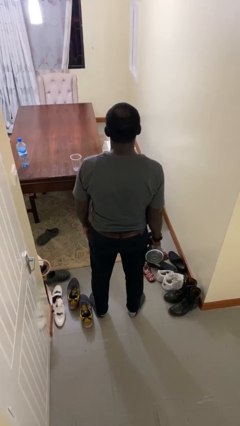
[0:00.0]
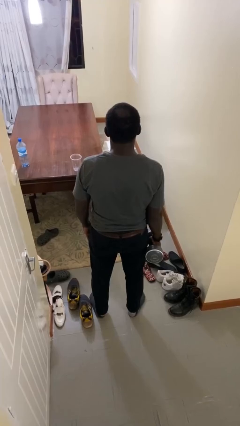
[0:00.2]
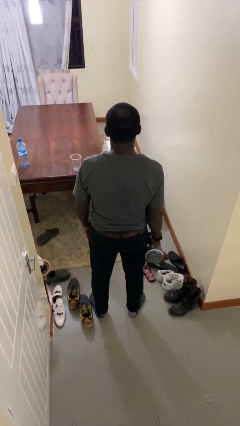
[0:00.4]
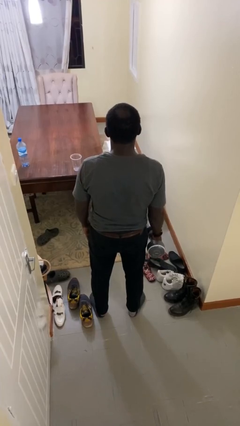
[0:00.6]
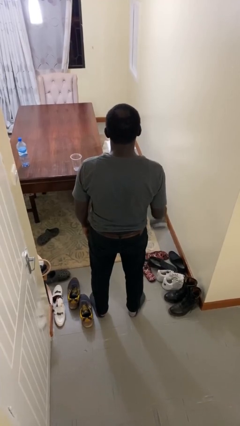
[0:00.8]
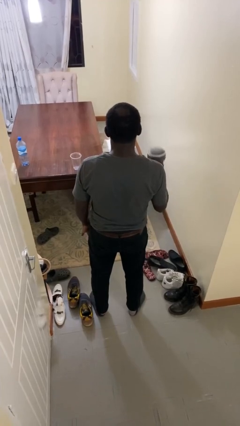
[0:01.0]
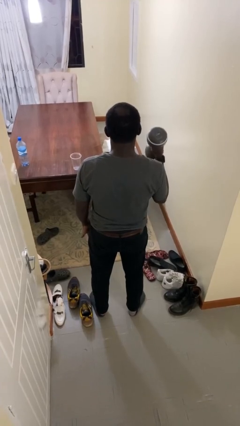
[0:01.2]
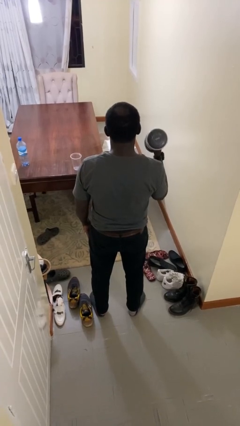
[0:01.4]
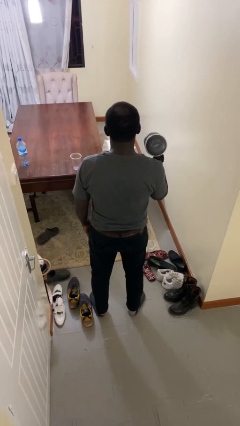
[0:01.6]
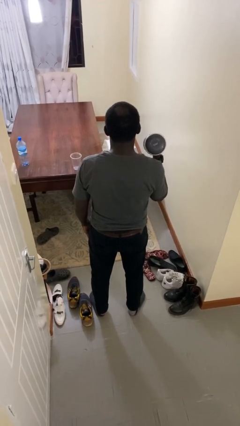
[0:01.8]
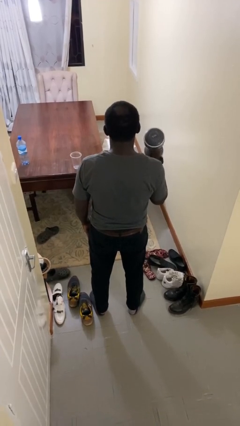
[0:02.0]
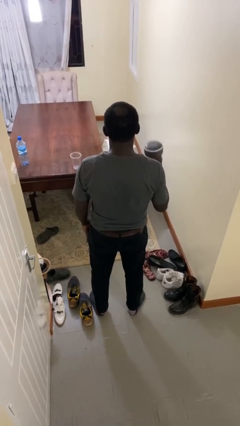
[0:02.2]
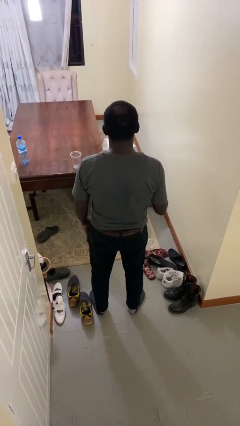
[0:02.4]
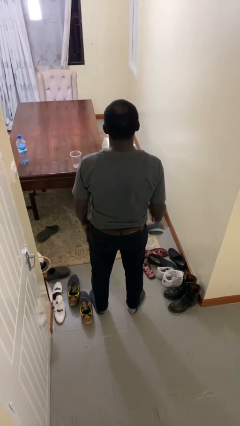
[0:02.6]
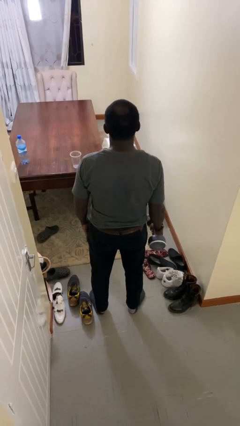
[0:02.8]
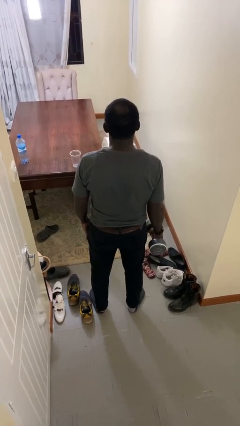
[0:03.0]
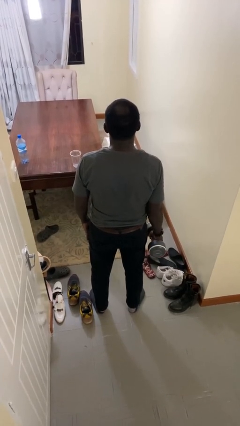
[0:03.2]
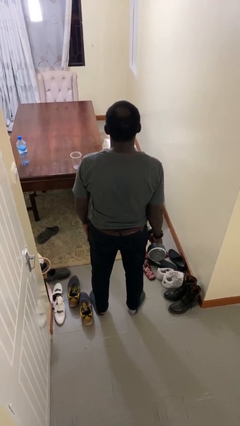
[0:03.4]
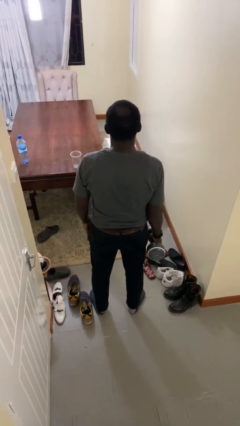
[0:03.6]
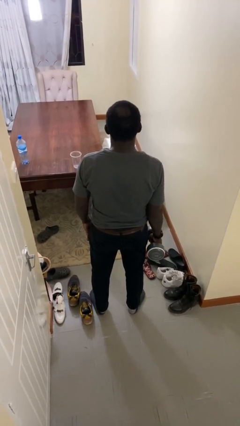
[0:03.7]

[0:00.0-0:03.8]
person lifts dumbbells

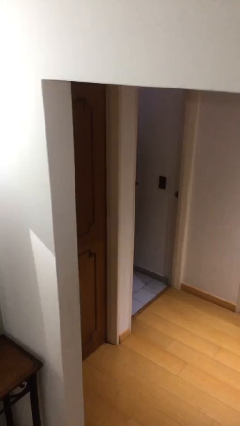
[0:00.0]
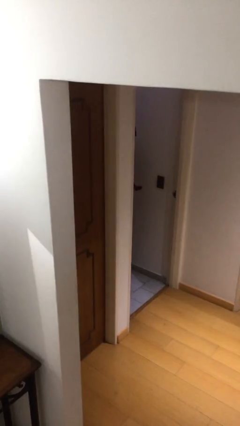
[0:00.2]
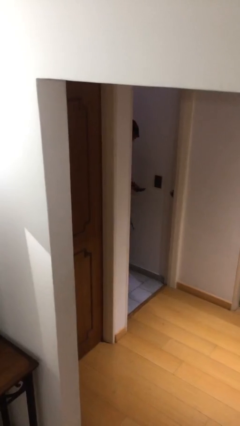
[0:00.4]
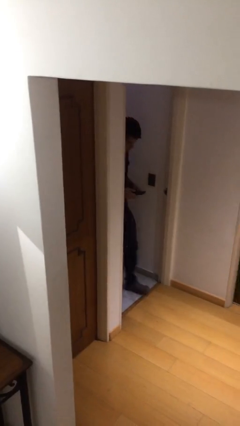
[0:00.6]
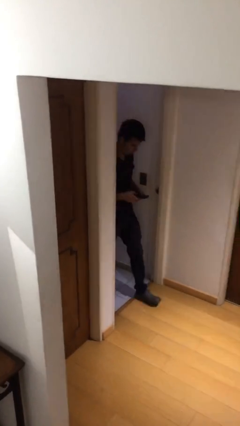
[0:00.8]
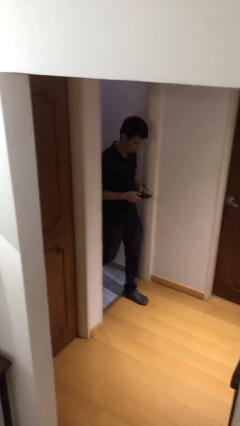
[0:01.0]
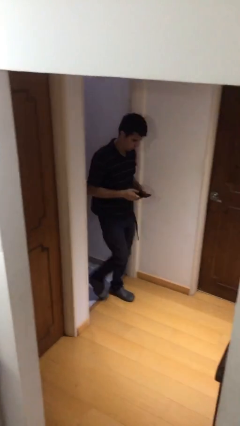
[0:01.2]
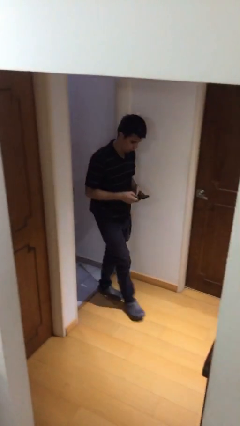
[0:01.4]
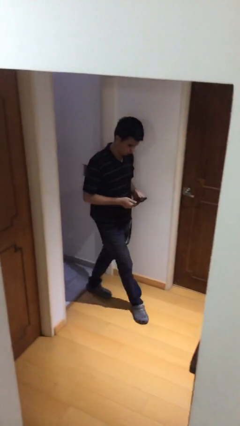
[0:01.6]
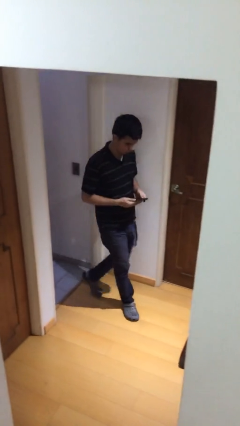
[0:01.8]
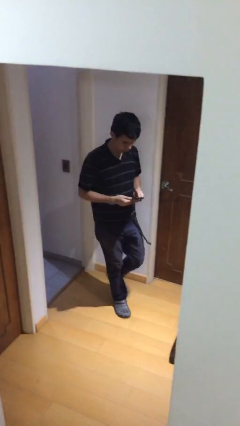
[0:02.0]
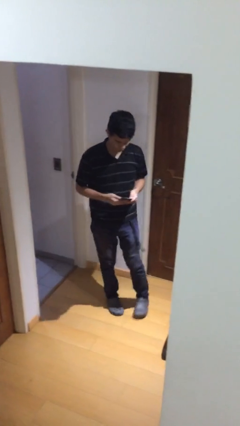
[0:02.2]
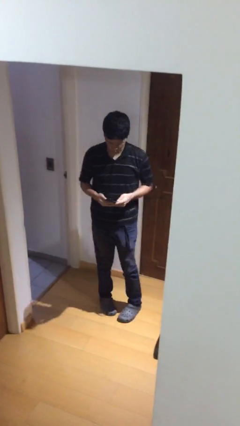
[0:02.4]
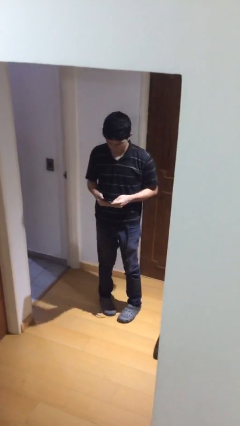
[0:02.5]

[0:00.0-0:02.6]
person enters scene through structure

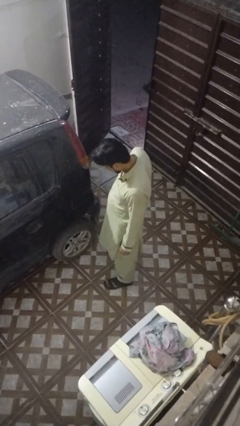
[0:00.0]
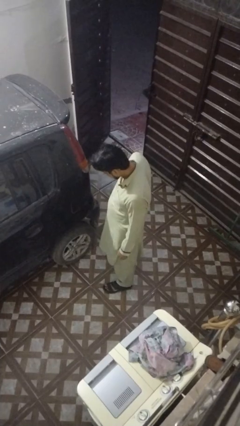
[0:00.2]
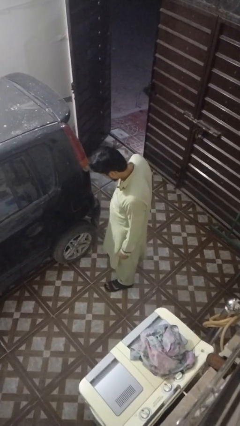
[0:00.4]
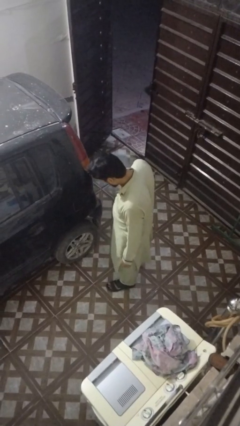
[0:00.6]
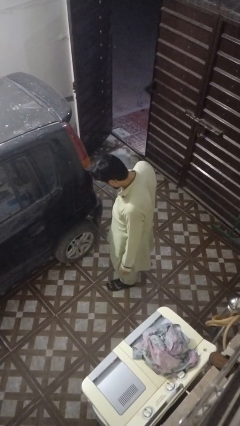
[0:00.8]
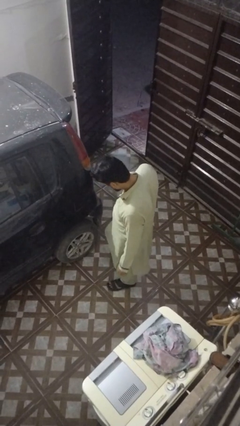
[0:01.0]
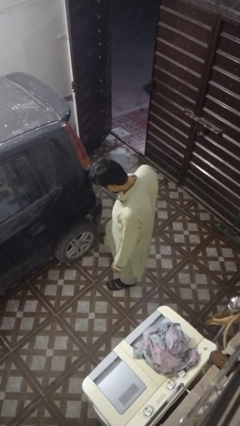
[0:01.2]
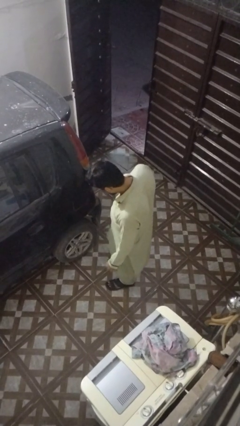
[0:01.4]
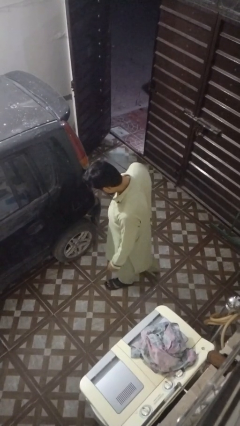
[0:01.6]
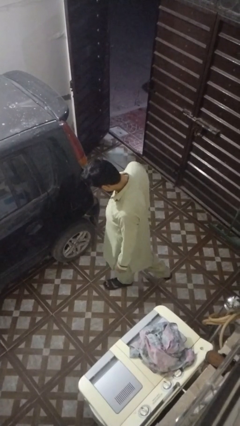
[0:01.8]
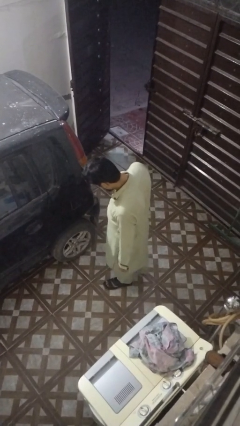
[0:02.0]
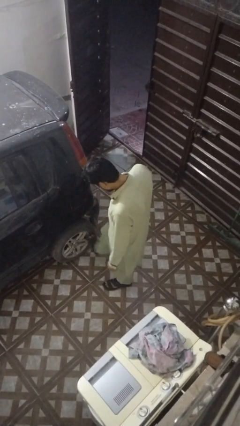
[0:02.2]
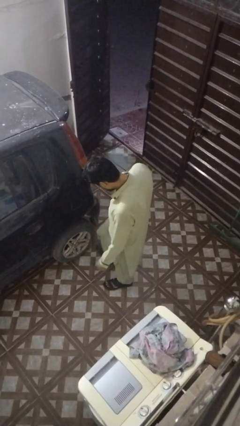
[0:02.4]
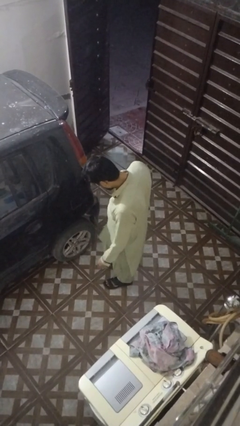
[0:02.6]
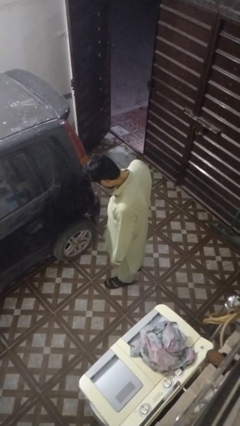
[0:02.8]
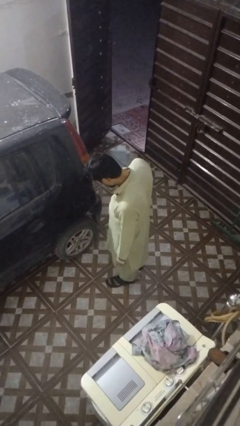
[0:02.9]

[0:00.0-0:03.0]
person kicks car tires

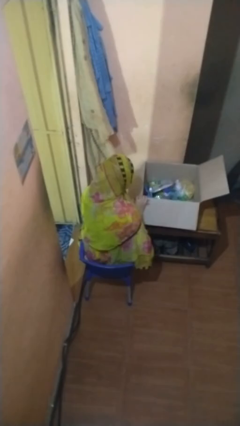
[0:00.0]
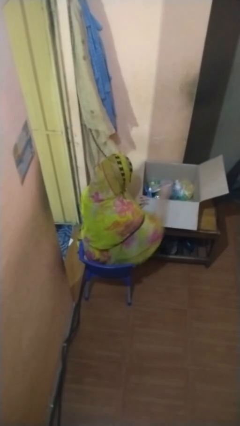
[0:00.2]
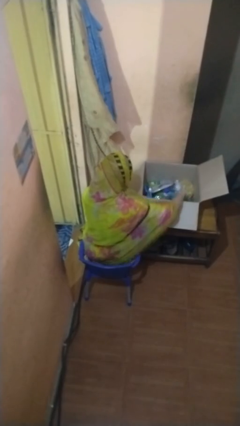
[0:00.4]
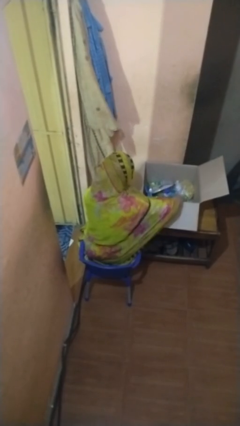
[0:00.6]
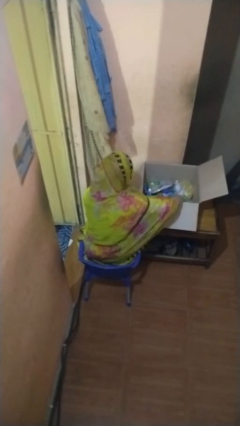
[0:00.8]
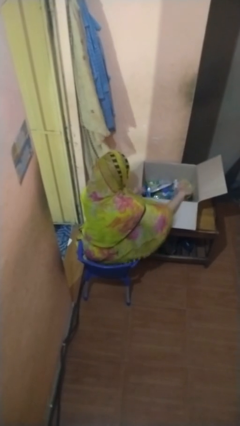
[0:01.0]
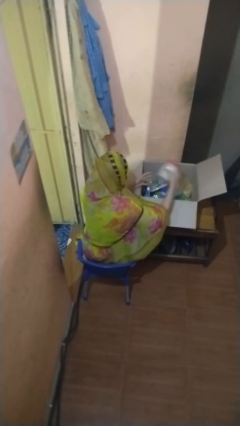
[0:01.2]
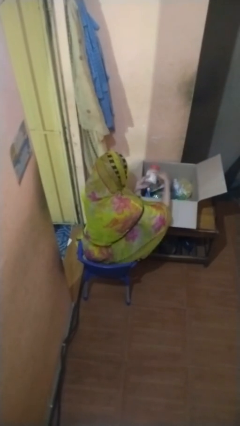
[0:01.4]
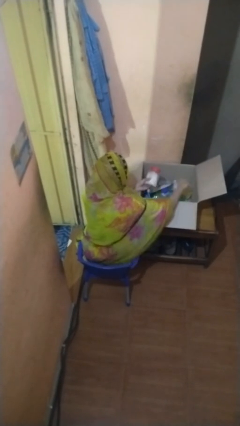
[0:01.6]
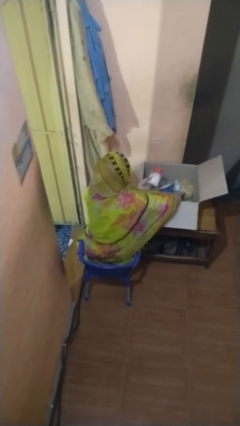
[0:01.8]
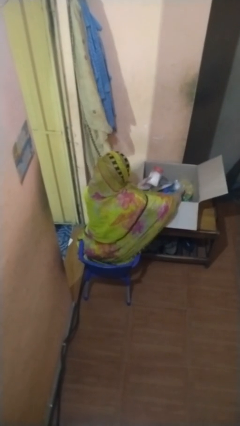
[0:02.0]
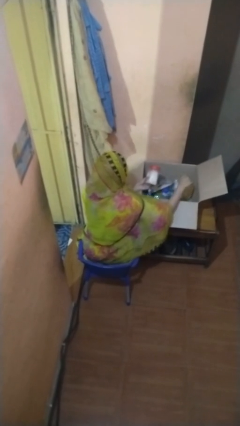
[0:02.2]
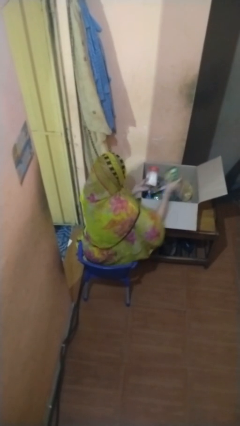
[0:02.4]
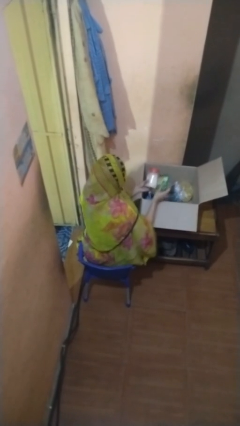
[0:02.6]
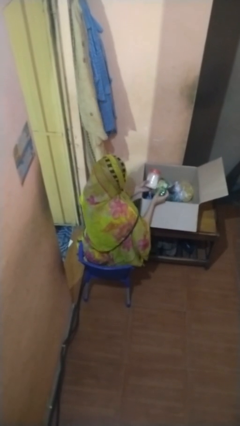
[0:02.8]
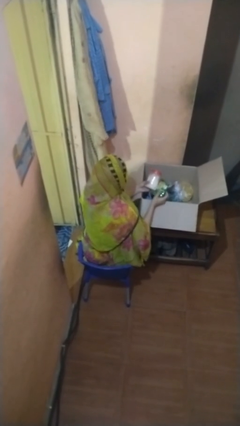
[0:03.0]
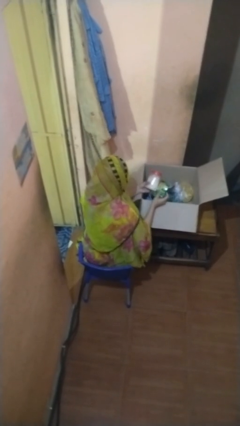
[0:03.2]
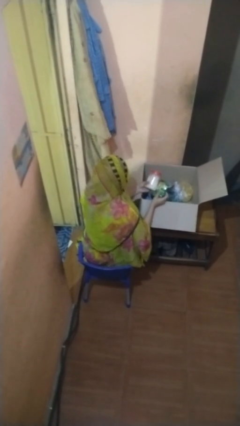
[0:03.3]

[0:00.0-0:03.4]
person takes object from box

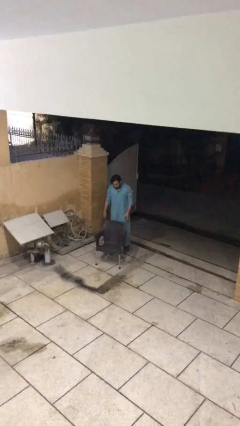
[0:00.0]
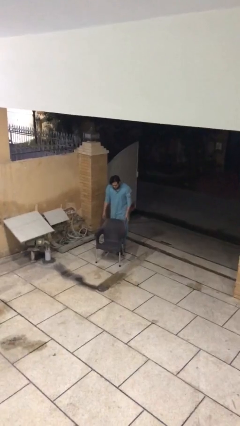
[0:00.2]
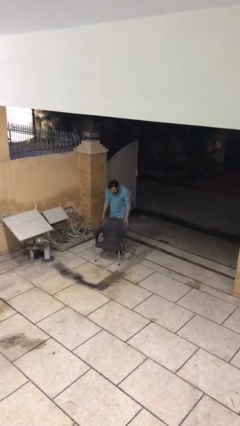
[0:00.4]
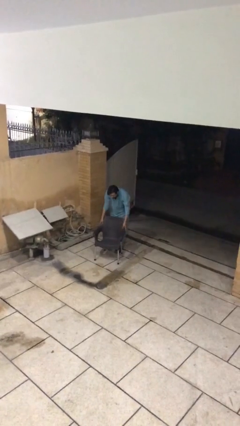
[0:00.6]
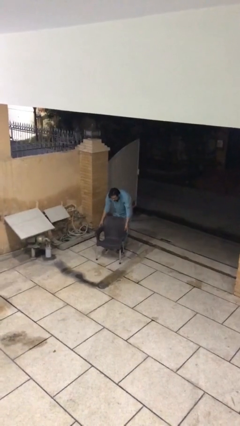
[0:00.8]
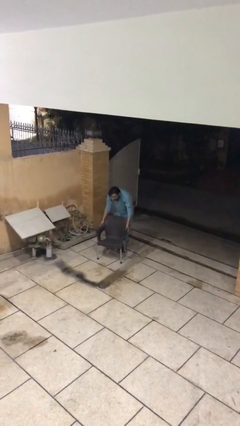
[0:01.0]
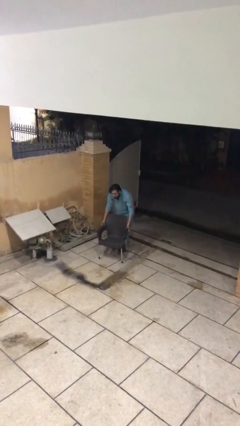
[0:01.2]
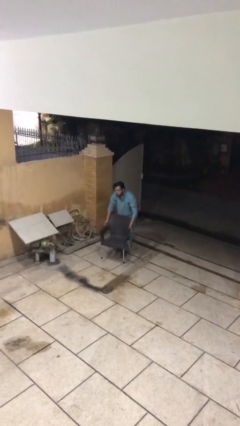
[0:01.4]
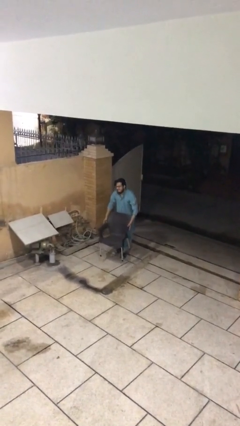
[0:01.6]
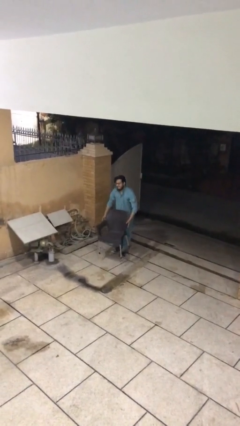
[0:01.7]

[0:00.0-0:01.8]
person picks up object from floor

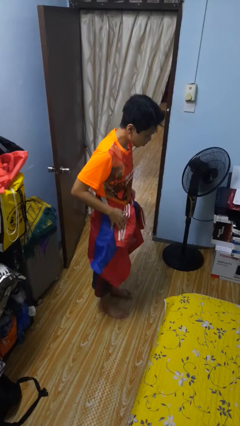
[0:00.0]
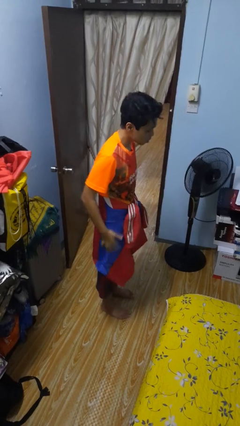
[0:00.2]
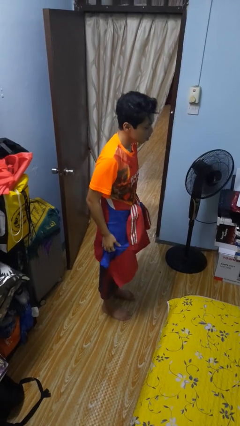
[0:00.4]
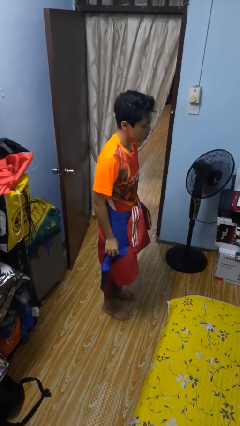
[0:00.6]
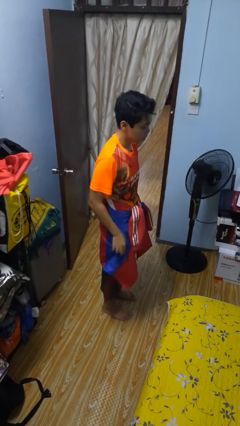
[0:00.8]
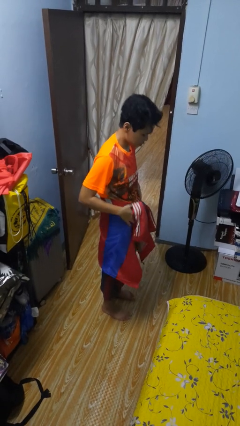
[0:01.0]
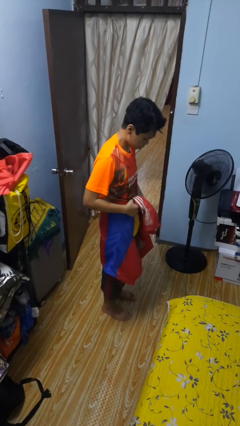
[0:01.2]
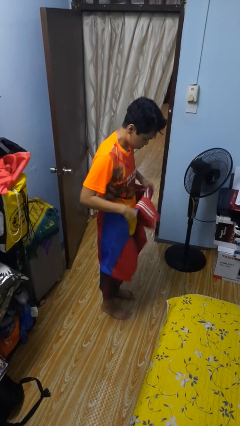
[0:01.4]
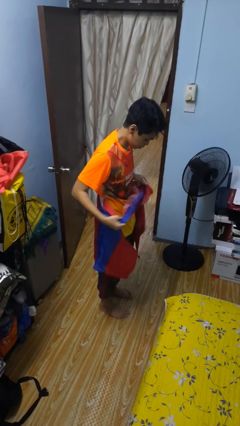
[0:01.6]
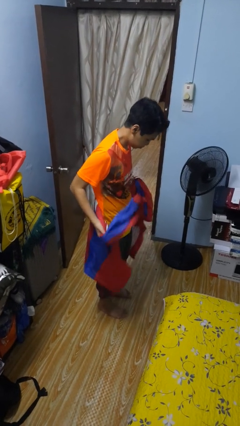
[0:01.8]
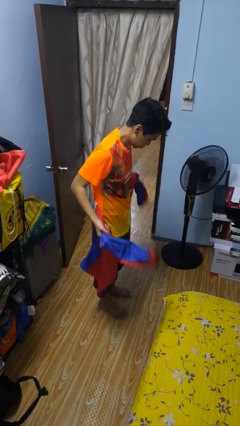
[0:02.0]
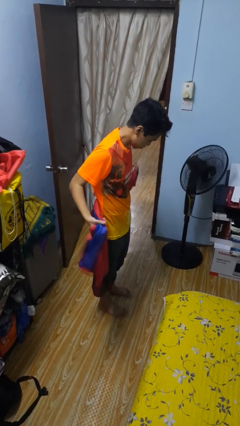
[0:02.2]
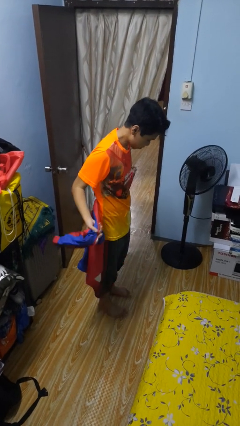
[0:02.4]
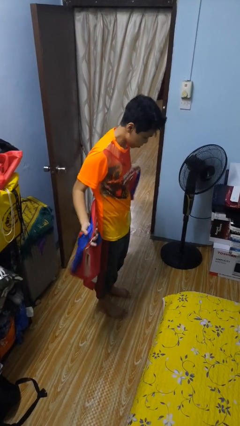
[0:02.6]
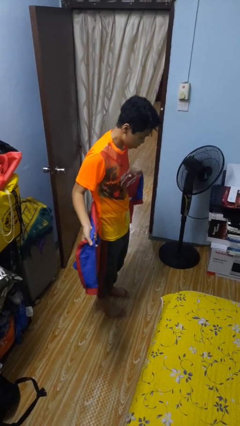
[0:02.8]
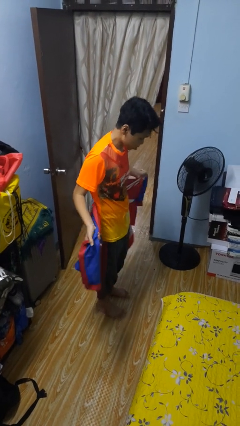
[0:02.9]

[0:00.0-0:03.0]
person unties jacket around waist
